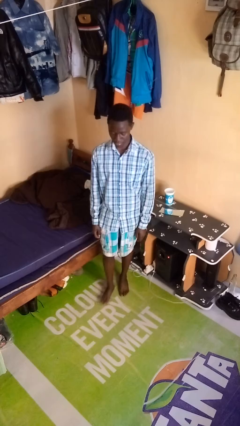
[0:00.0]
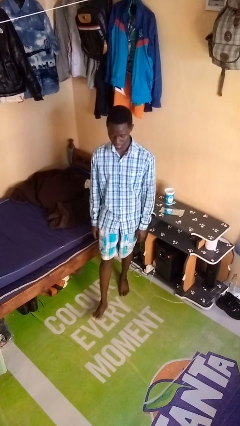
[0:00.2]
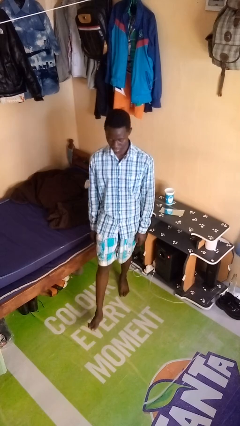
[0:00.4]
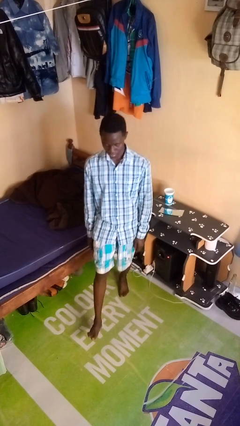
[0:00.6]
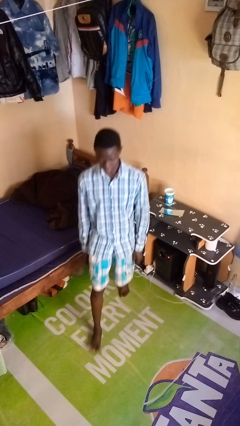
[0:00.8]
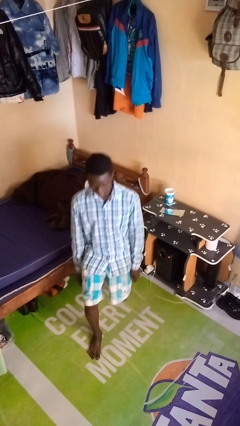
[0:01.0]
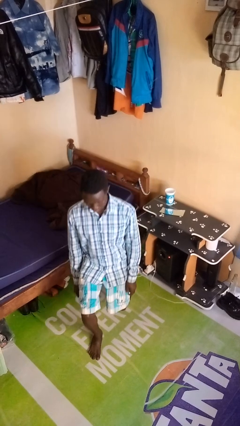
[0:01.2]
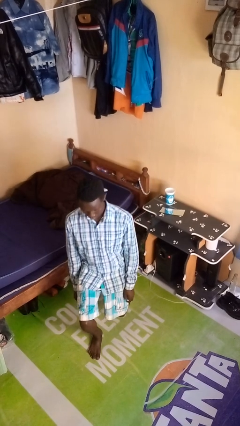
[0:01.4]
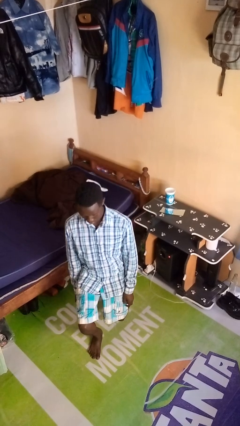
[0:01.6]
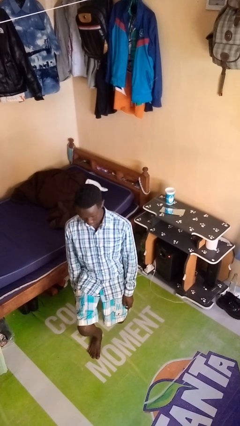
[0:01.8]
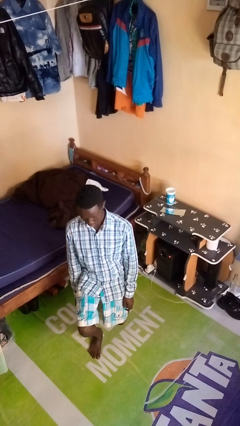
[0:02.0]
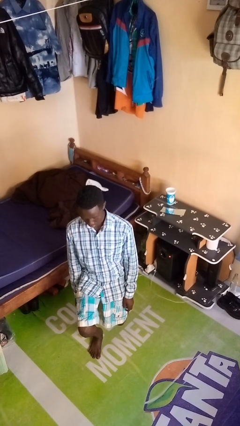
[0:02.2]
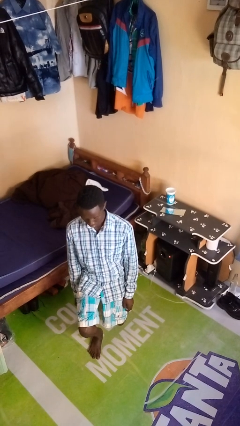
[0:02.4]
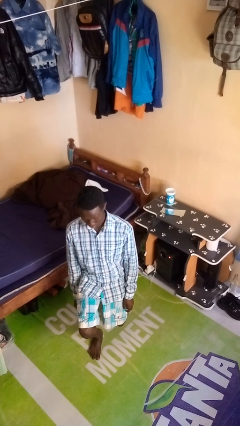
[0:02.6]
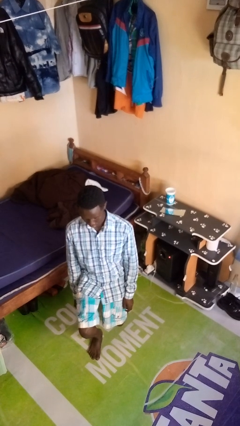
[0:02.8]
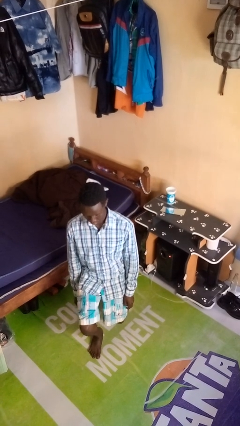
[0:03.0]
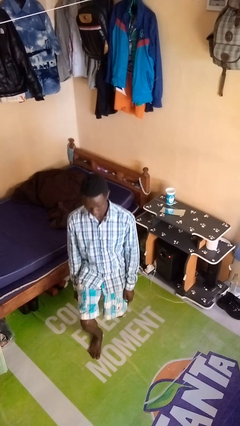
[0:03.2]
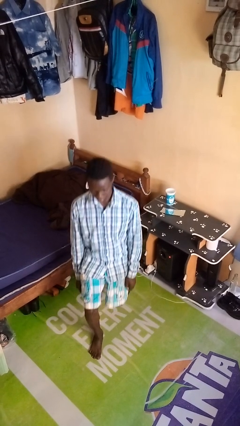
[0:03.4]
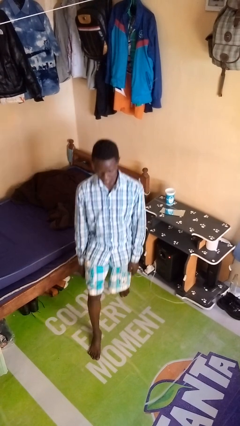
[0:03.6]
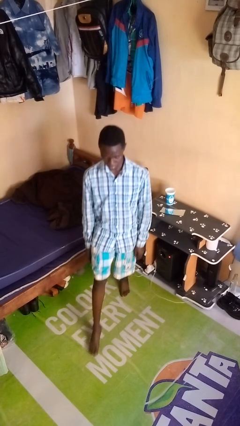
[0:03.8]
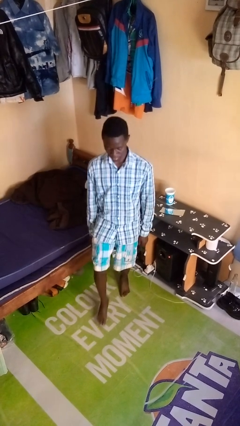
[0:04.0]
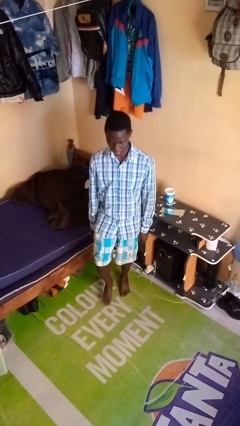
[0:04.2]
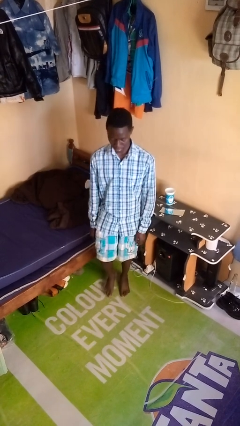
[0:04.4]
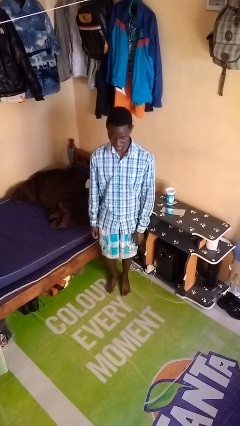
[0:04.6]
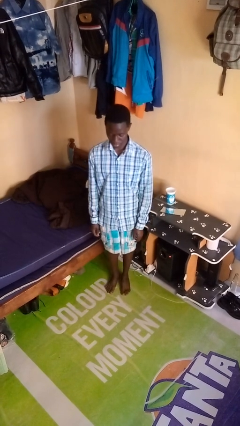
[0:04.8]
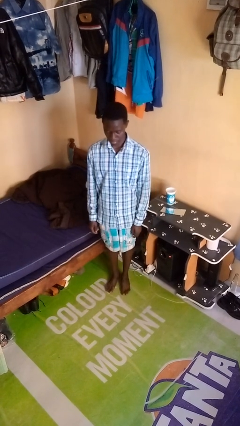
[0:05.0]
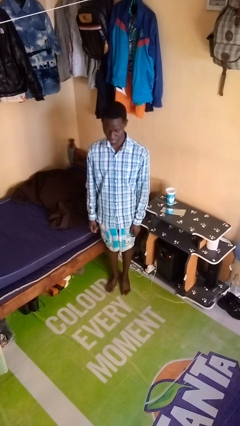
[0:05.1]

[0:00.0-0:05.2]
person exercises with lunges

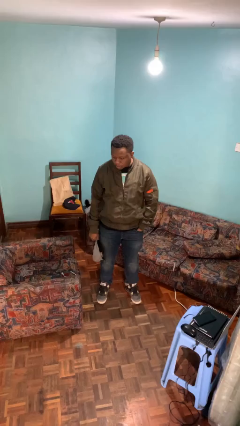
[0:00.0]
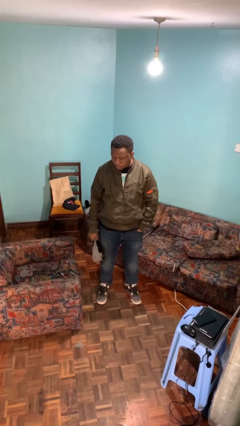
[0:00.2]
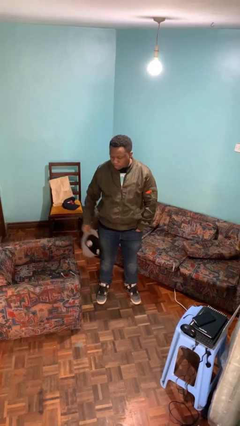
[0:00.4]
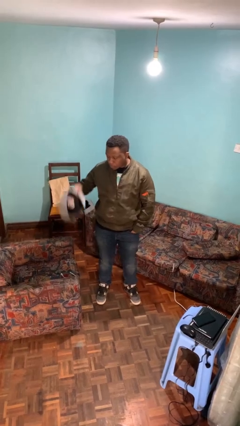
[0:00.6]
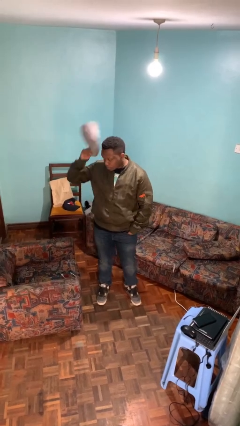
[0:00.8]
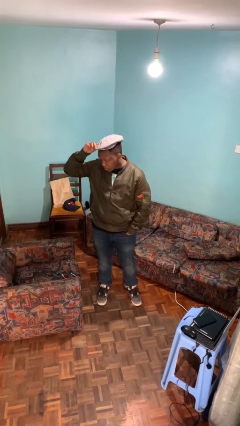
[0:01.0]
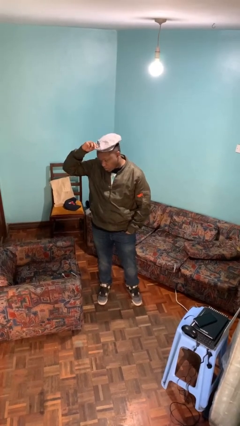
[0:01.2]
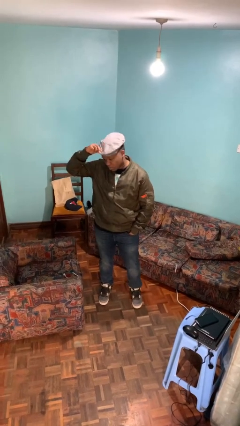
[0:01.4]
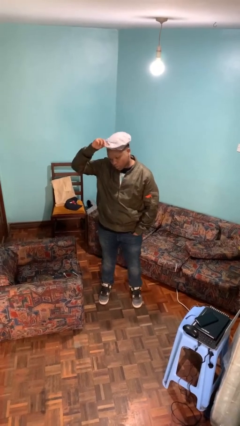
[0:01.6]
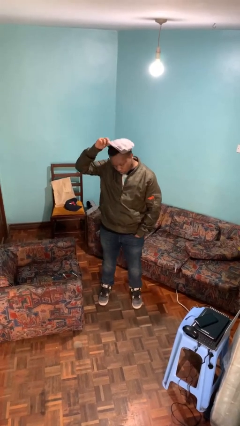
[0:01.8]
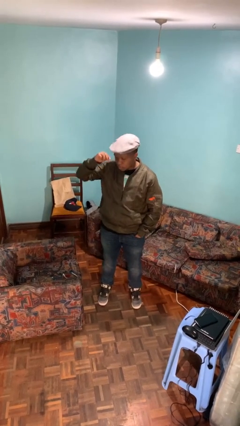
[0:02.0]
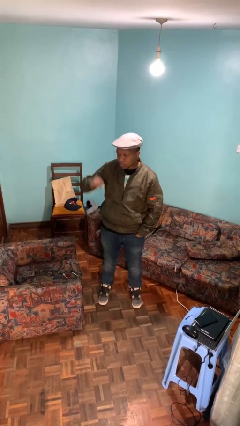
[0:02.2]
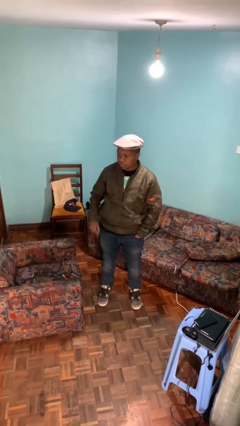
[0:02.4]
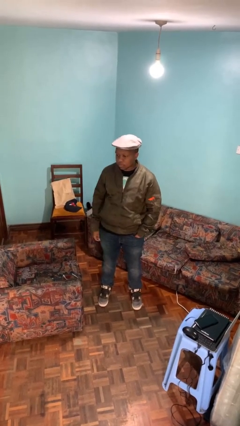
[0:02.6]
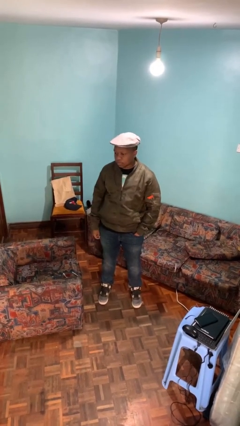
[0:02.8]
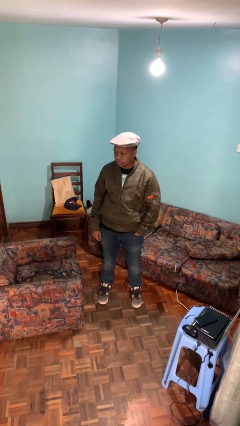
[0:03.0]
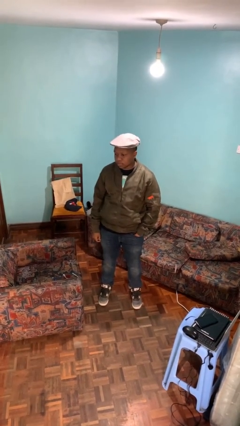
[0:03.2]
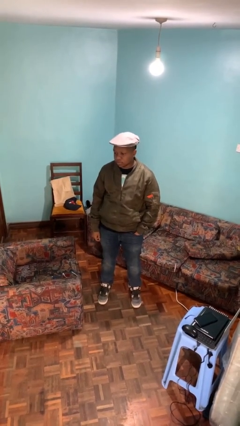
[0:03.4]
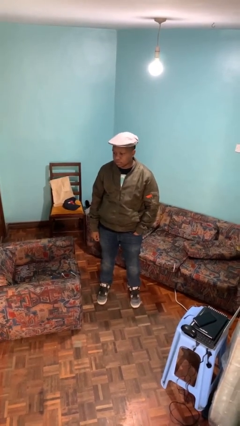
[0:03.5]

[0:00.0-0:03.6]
person puts on hat

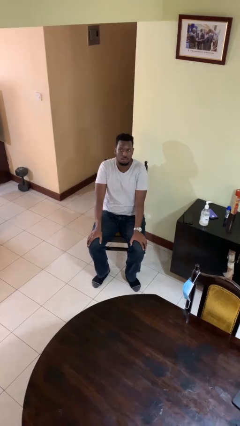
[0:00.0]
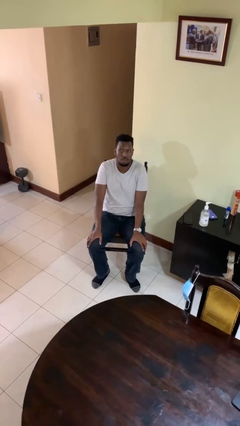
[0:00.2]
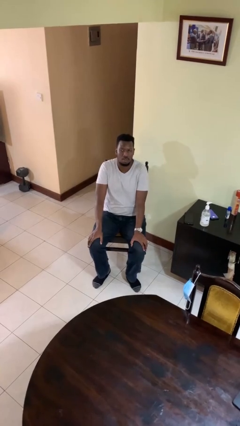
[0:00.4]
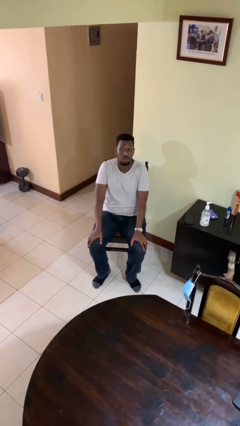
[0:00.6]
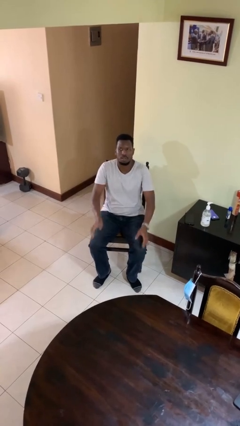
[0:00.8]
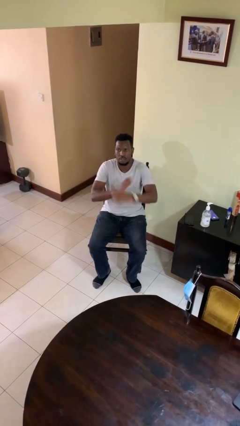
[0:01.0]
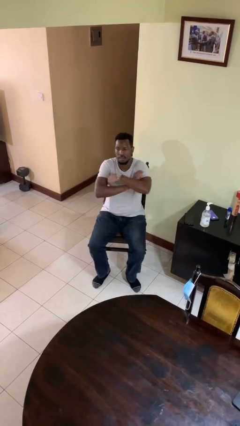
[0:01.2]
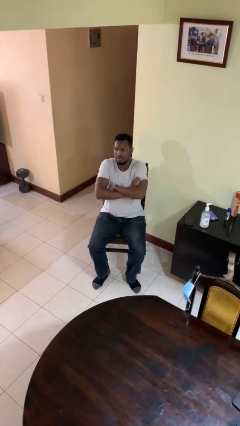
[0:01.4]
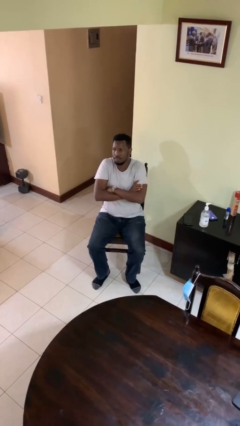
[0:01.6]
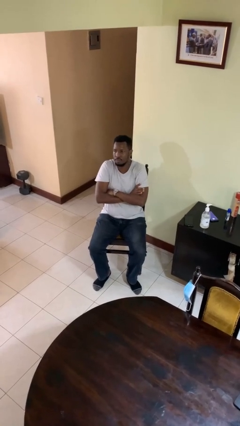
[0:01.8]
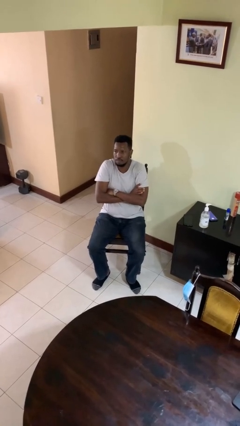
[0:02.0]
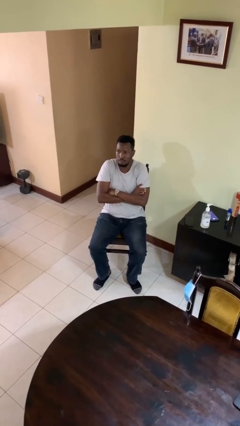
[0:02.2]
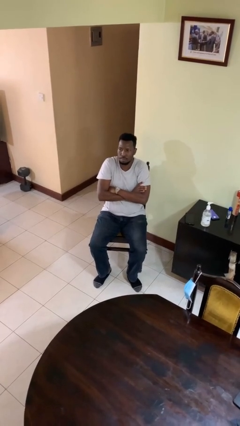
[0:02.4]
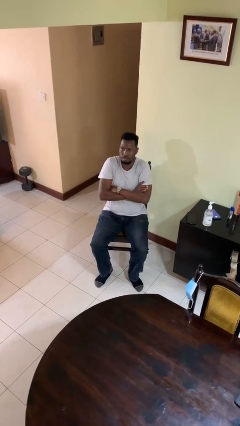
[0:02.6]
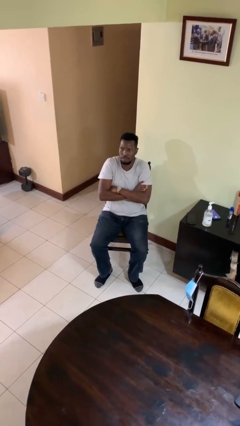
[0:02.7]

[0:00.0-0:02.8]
person crosses arms

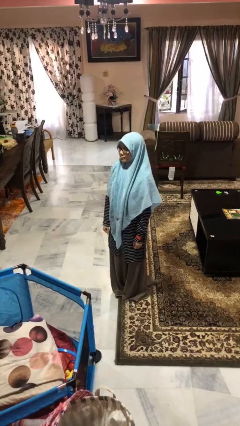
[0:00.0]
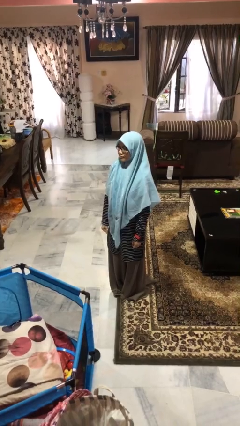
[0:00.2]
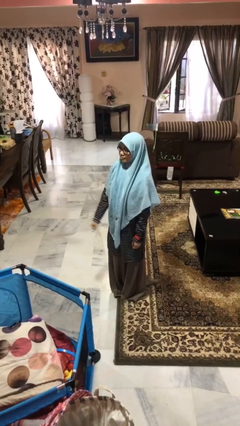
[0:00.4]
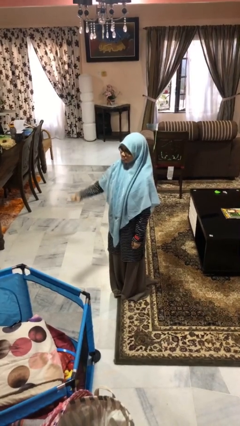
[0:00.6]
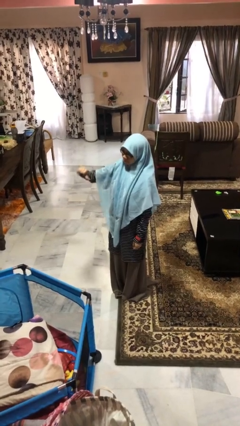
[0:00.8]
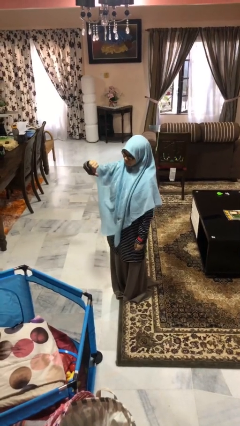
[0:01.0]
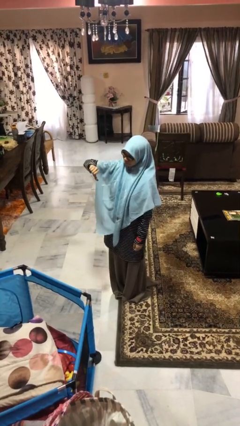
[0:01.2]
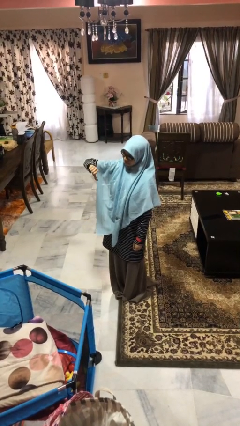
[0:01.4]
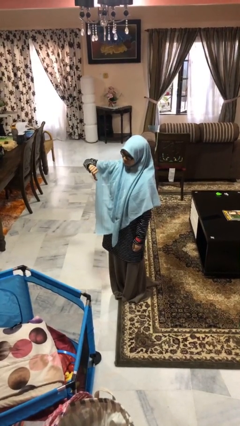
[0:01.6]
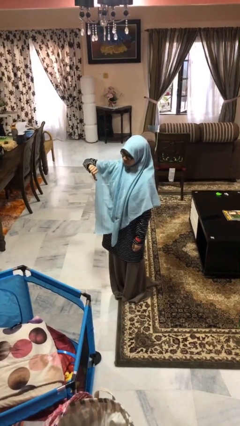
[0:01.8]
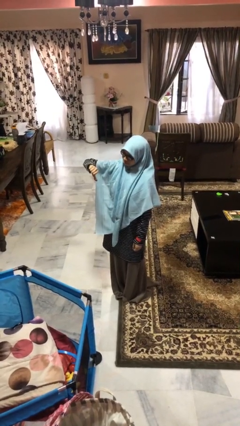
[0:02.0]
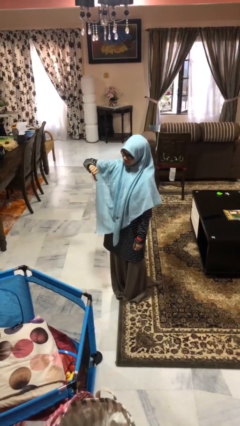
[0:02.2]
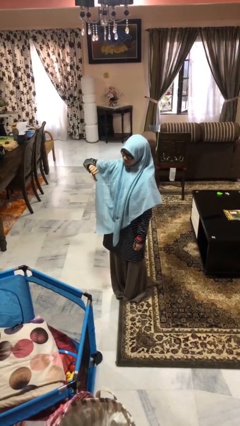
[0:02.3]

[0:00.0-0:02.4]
person gestures thumbs down

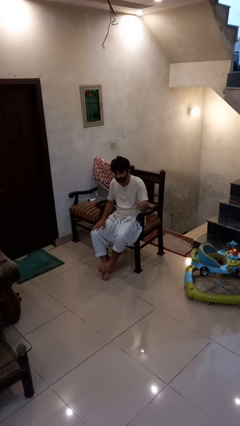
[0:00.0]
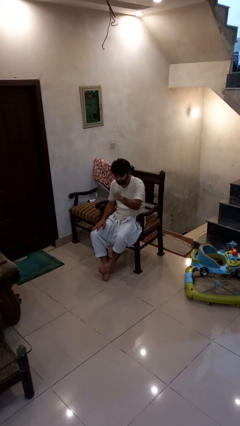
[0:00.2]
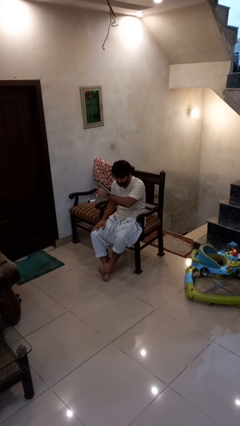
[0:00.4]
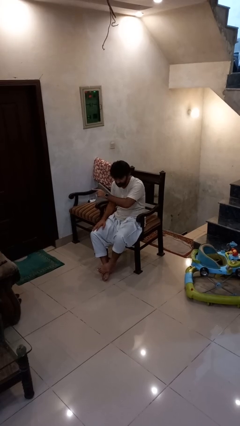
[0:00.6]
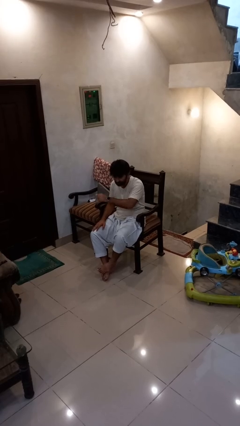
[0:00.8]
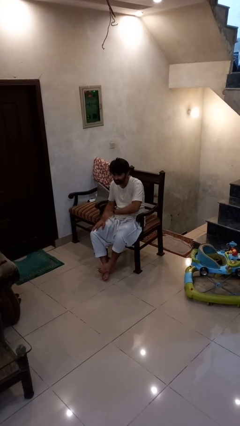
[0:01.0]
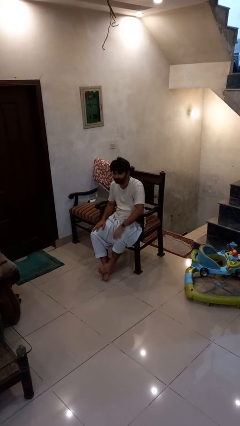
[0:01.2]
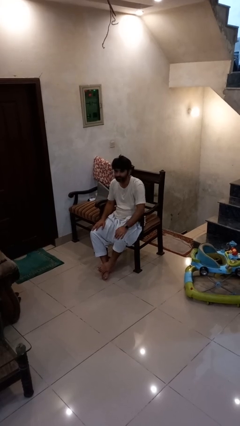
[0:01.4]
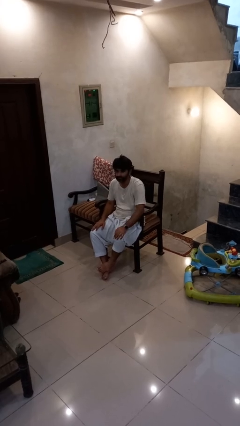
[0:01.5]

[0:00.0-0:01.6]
person gestures swipe right

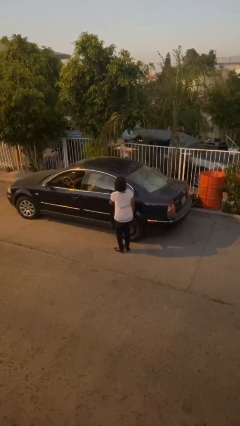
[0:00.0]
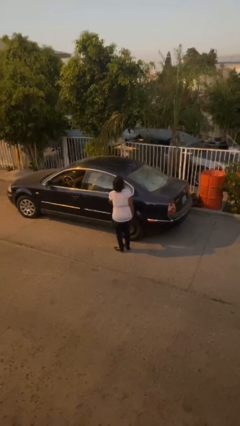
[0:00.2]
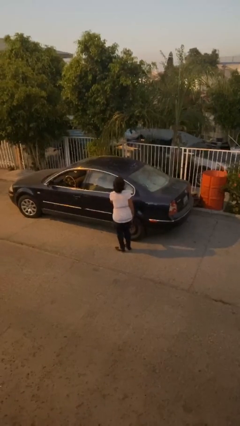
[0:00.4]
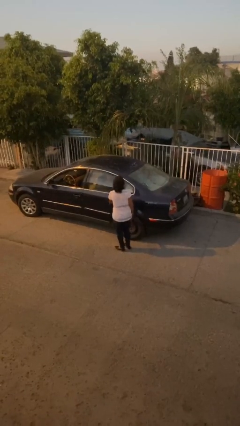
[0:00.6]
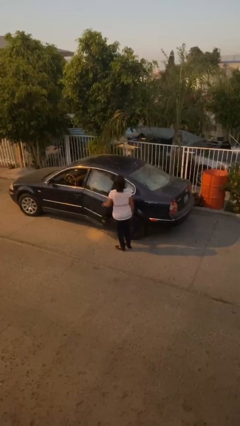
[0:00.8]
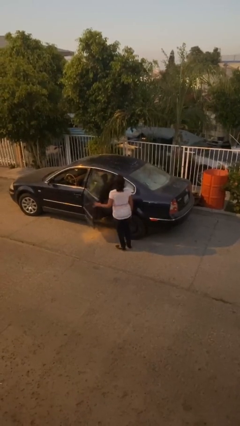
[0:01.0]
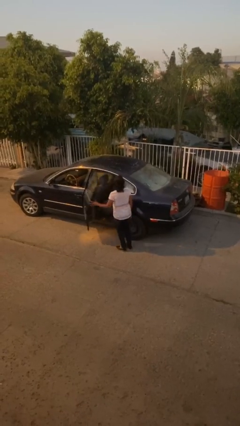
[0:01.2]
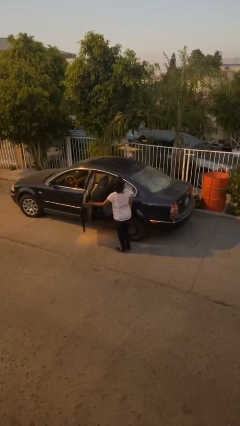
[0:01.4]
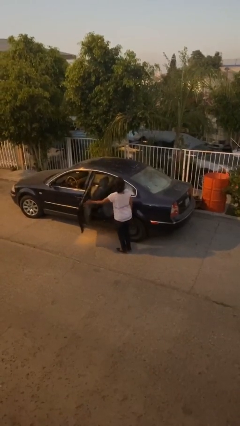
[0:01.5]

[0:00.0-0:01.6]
person opens car door
